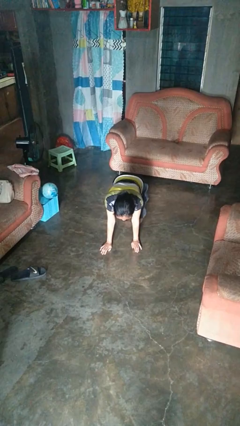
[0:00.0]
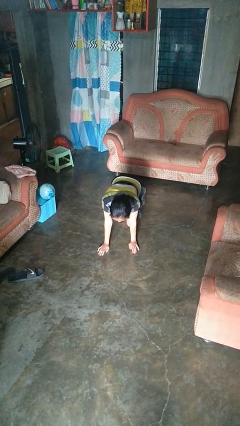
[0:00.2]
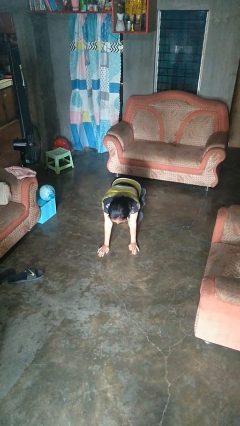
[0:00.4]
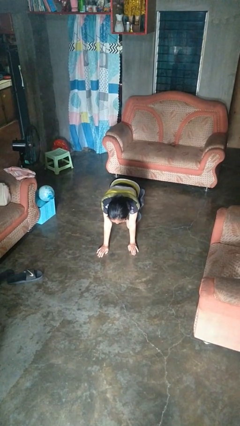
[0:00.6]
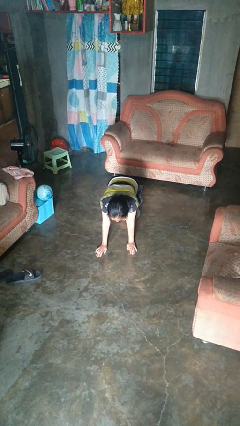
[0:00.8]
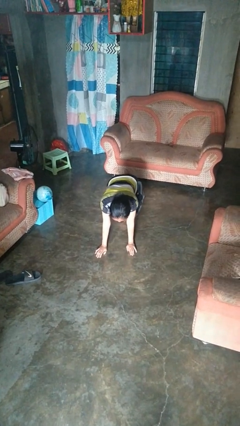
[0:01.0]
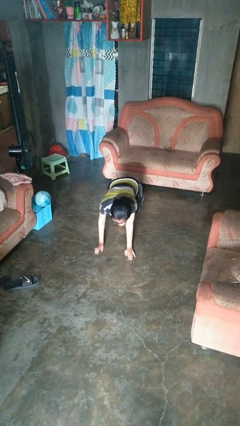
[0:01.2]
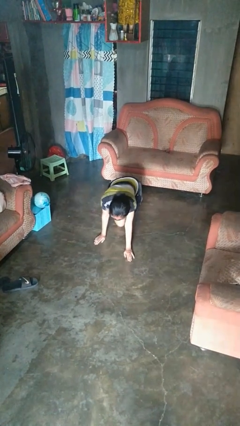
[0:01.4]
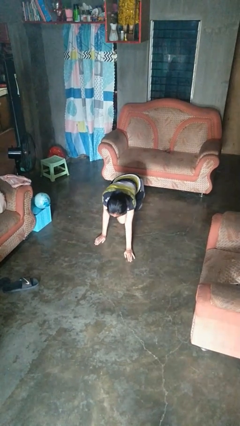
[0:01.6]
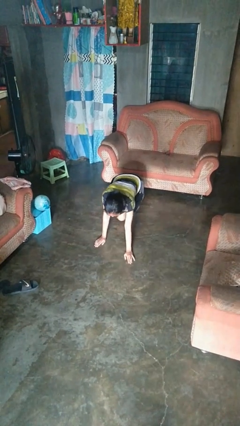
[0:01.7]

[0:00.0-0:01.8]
person crawls

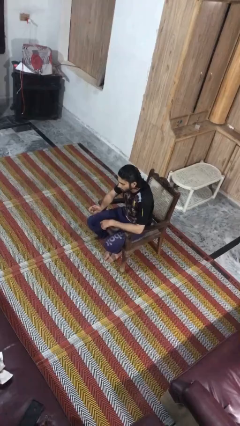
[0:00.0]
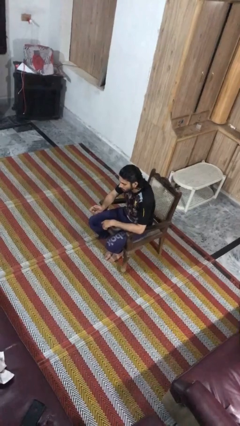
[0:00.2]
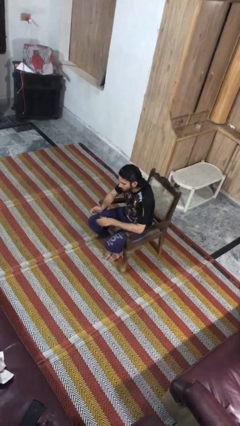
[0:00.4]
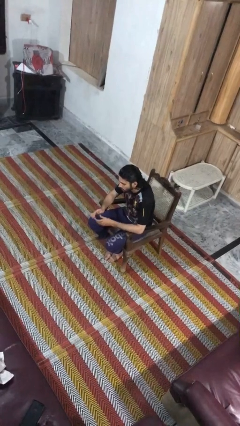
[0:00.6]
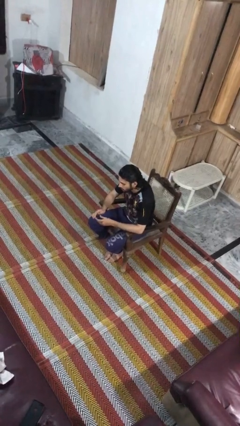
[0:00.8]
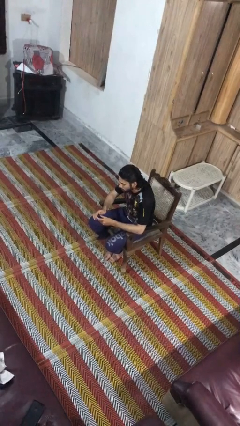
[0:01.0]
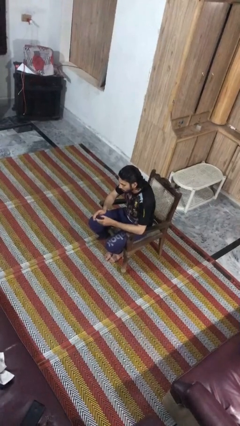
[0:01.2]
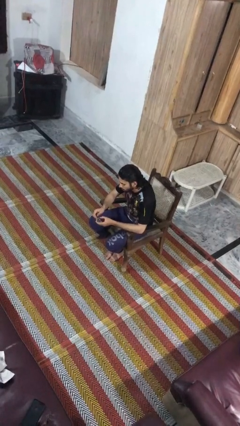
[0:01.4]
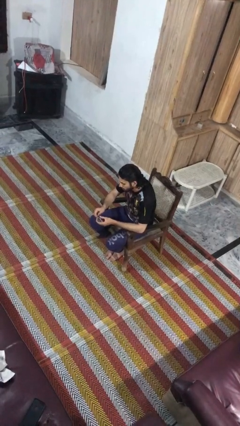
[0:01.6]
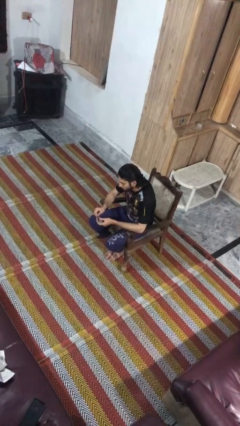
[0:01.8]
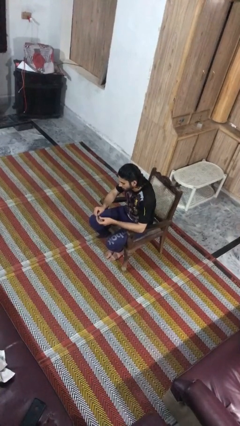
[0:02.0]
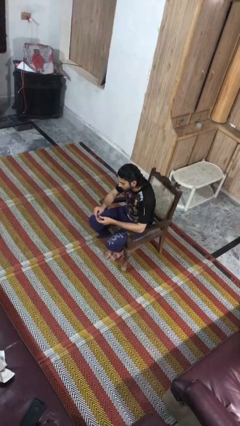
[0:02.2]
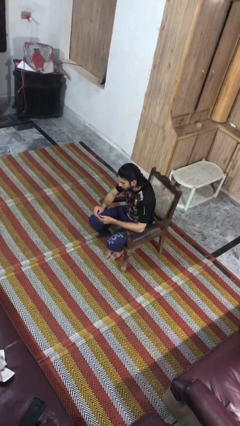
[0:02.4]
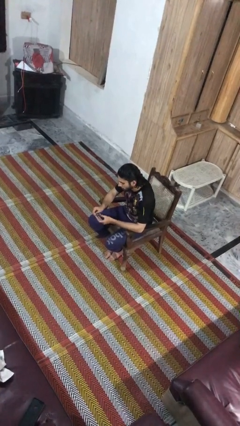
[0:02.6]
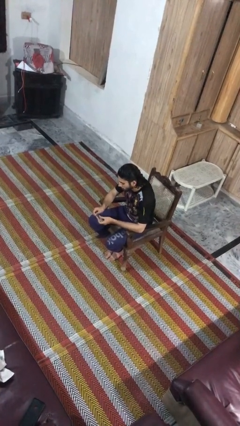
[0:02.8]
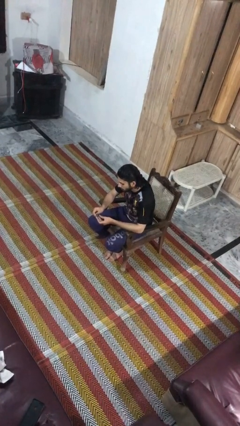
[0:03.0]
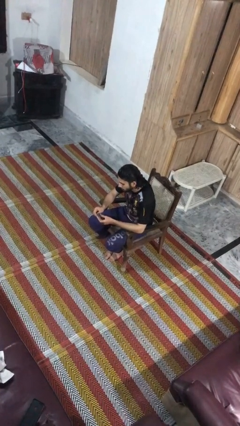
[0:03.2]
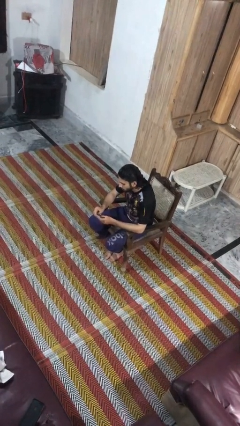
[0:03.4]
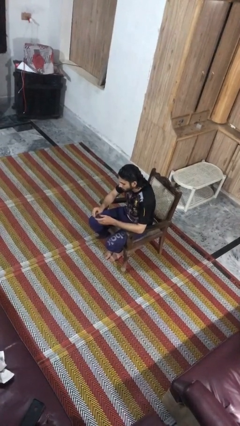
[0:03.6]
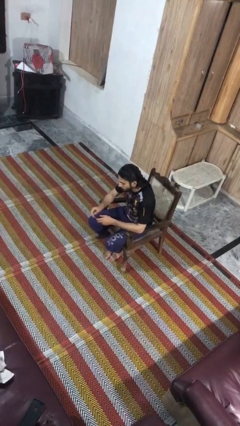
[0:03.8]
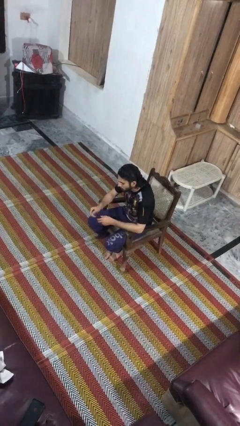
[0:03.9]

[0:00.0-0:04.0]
person clips fingernails

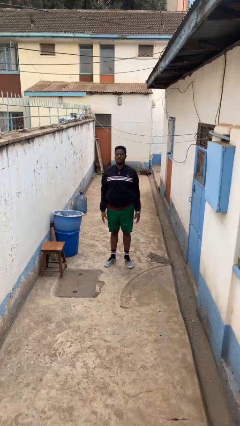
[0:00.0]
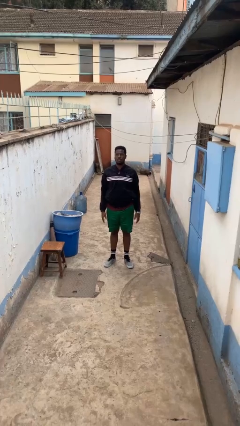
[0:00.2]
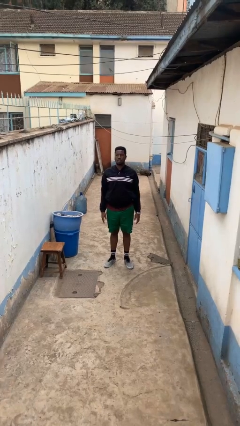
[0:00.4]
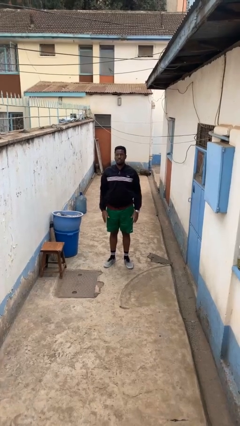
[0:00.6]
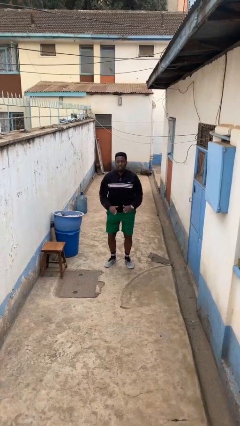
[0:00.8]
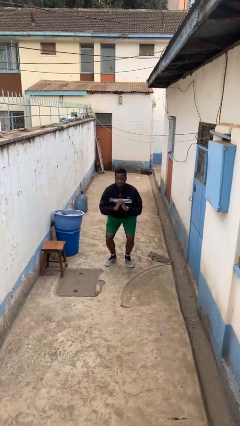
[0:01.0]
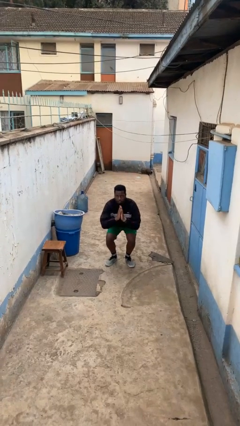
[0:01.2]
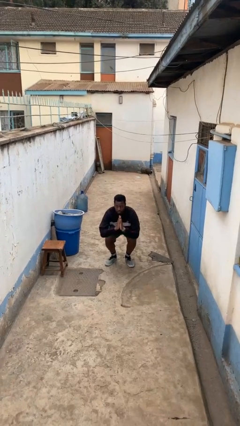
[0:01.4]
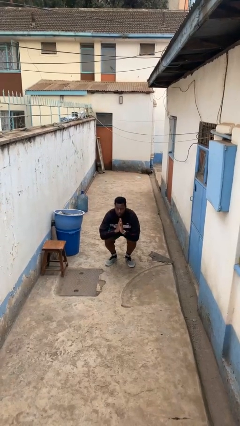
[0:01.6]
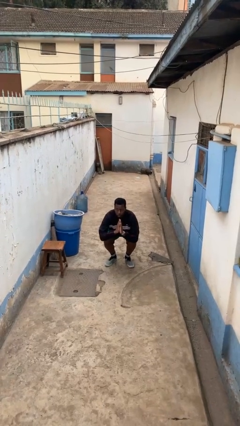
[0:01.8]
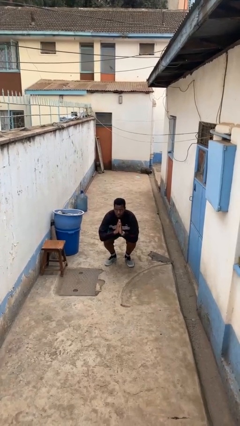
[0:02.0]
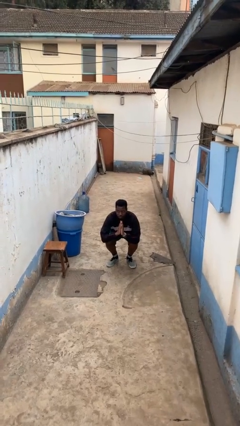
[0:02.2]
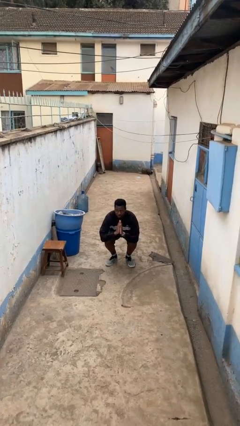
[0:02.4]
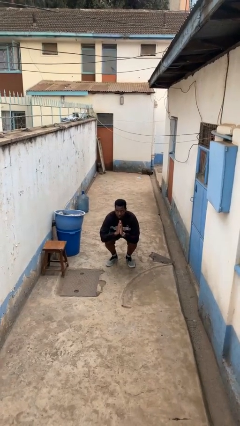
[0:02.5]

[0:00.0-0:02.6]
person squats

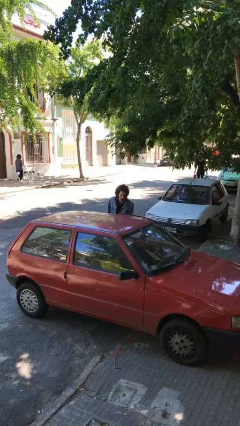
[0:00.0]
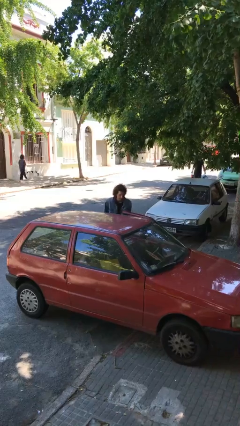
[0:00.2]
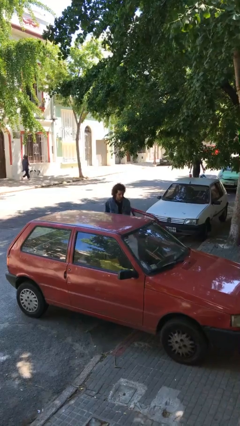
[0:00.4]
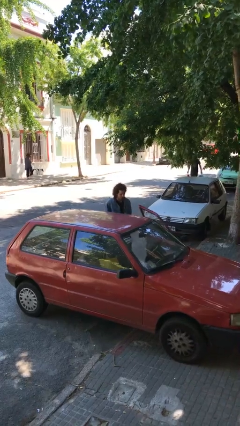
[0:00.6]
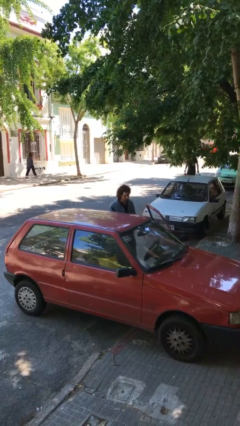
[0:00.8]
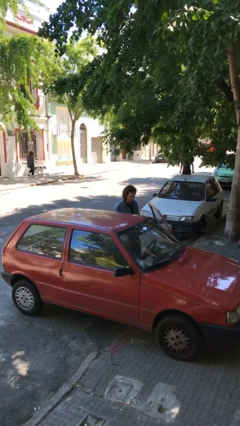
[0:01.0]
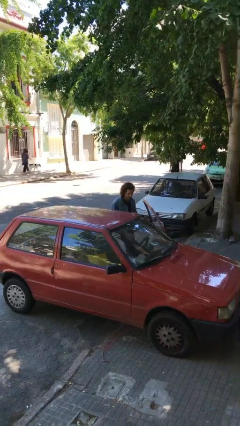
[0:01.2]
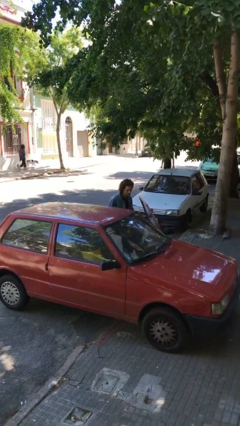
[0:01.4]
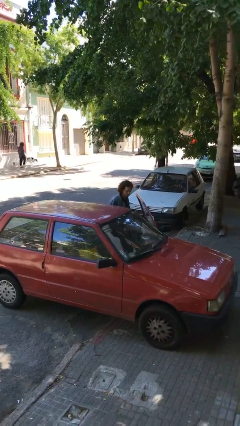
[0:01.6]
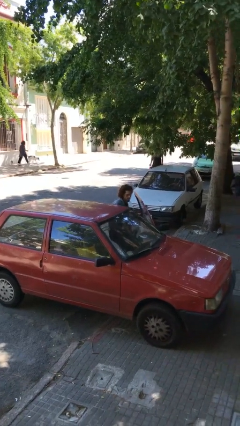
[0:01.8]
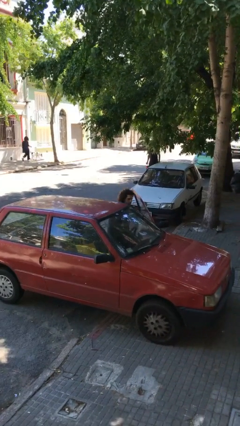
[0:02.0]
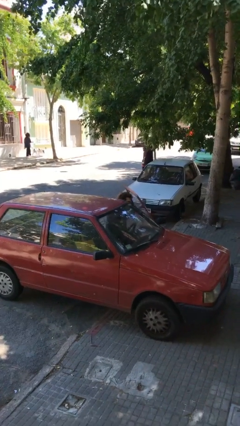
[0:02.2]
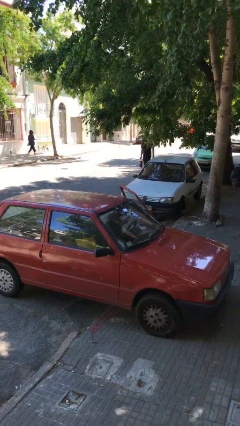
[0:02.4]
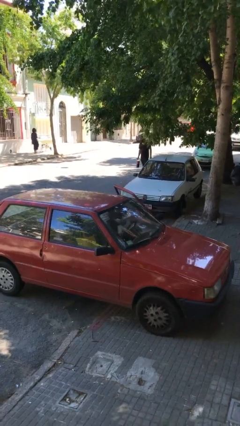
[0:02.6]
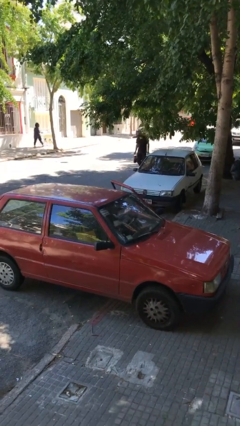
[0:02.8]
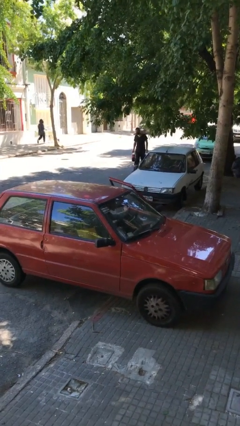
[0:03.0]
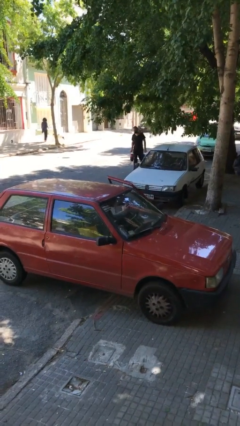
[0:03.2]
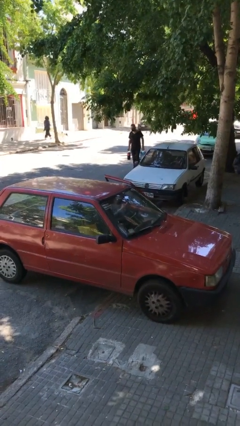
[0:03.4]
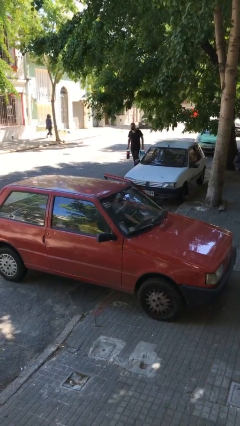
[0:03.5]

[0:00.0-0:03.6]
car picks up person

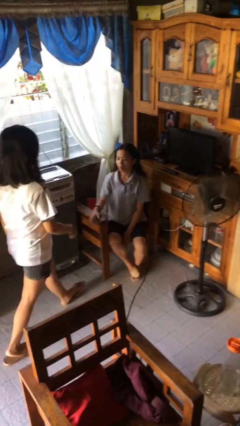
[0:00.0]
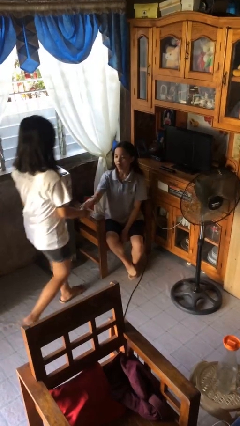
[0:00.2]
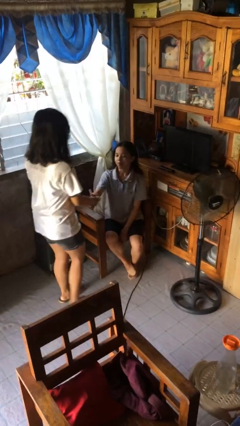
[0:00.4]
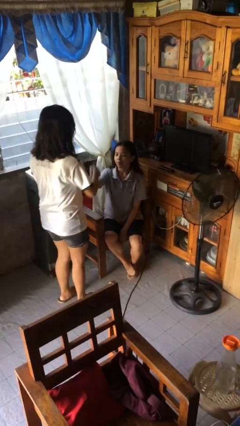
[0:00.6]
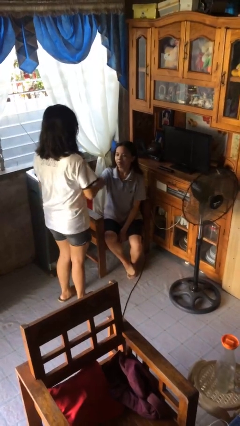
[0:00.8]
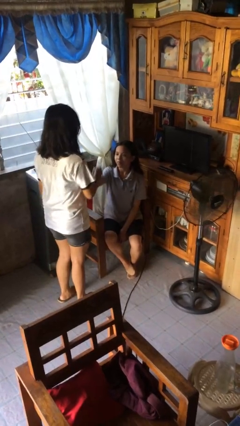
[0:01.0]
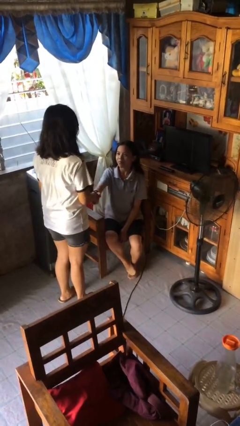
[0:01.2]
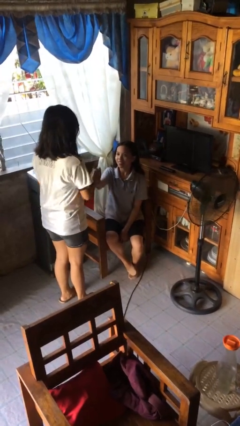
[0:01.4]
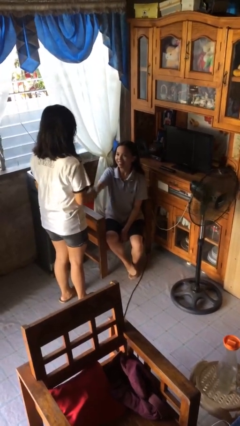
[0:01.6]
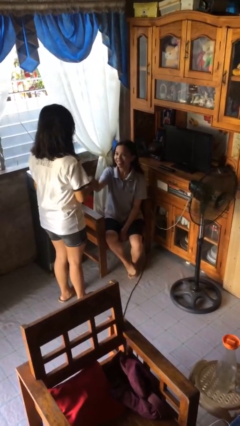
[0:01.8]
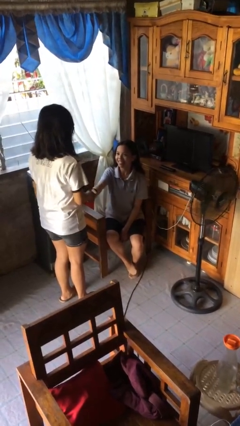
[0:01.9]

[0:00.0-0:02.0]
person shakes hand

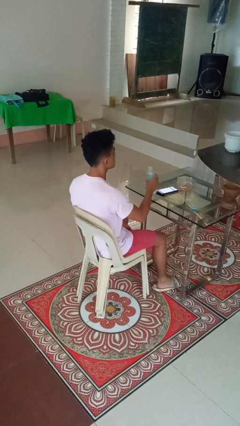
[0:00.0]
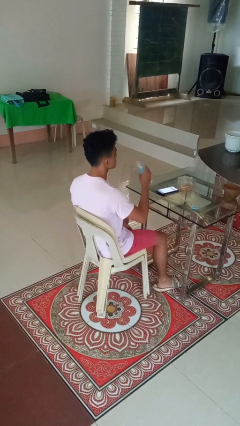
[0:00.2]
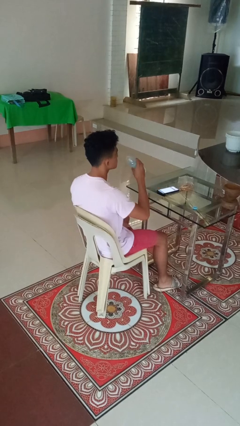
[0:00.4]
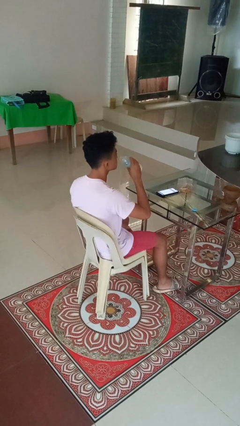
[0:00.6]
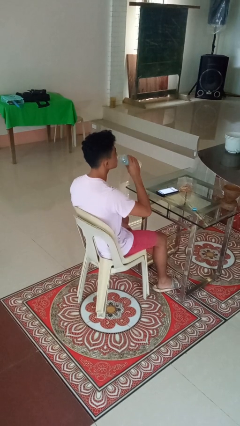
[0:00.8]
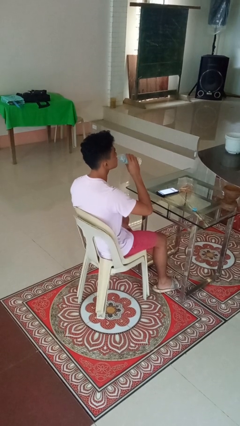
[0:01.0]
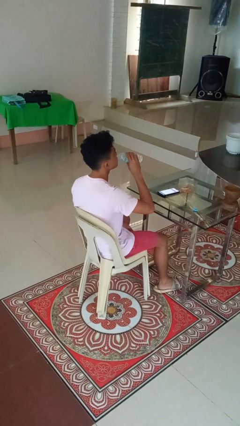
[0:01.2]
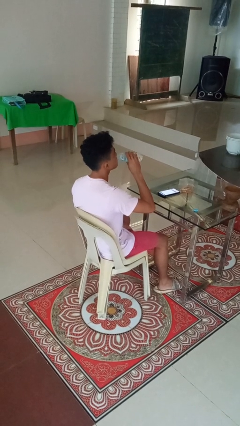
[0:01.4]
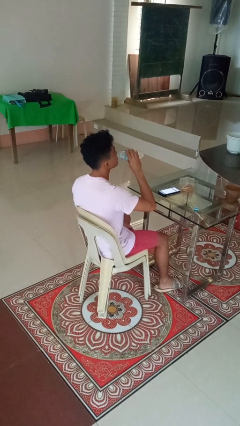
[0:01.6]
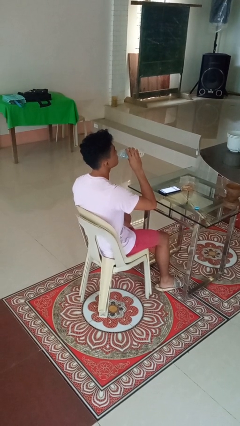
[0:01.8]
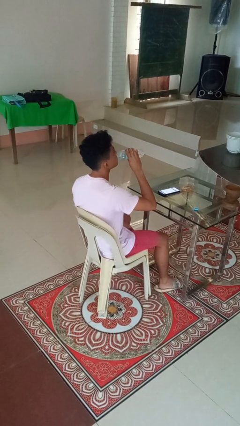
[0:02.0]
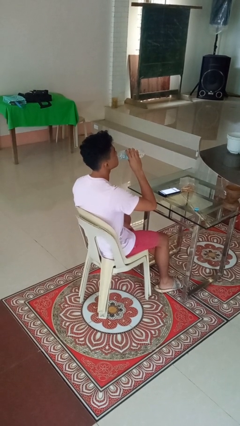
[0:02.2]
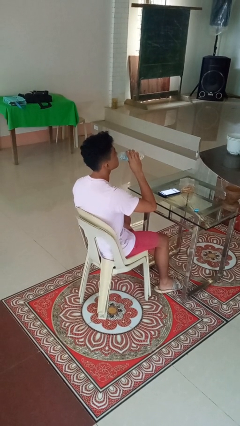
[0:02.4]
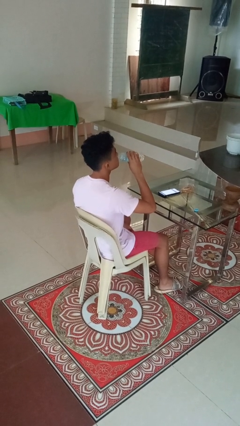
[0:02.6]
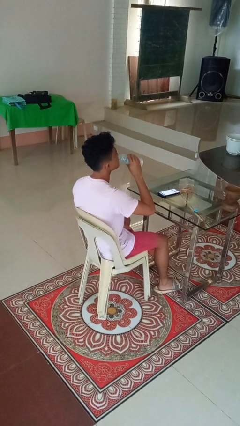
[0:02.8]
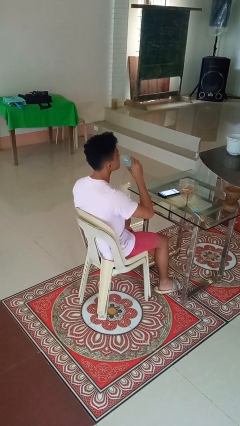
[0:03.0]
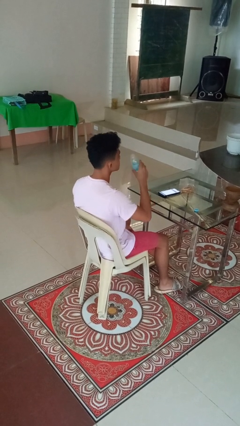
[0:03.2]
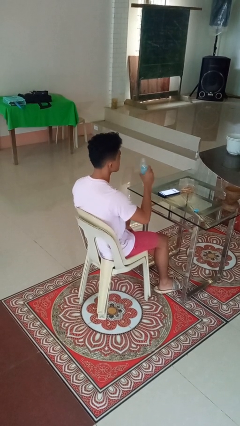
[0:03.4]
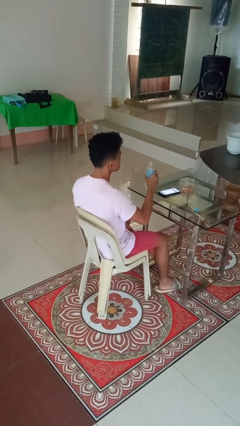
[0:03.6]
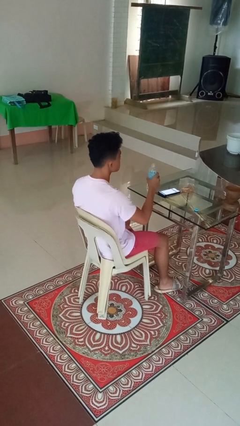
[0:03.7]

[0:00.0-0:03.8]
person drinks from bottle
